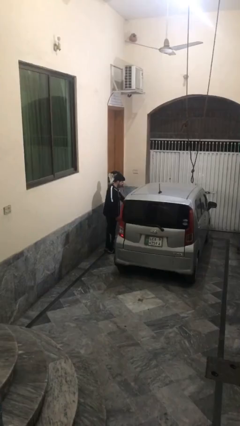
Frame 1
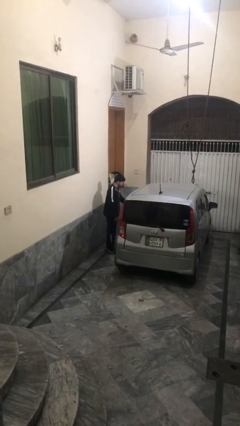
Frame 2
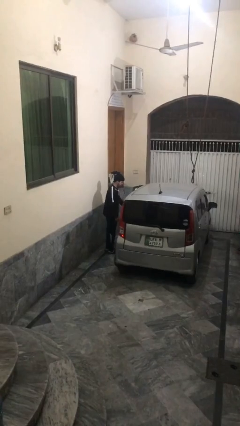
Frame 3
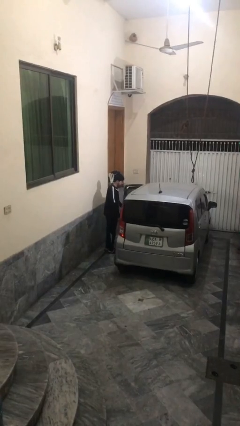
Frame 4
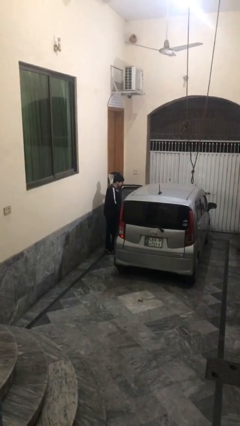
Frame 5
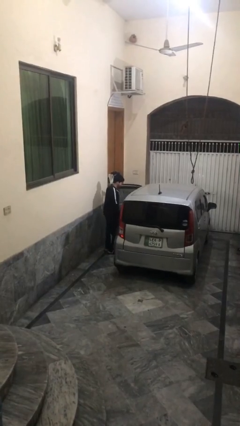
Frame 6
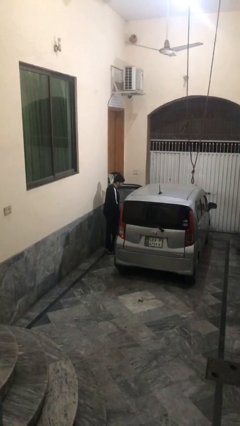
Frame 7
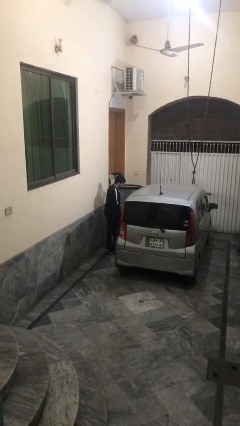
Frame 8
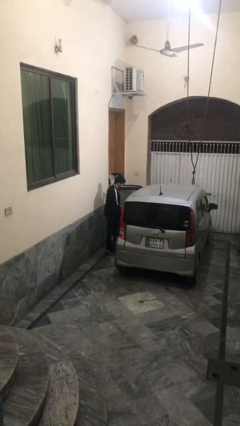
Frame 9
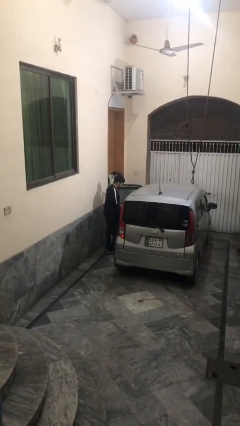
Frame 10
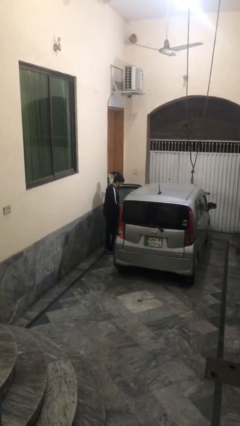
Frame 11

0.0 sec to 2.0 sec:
person opens car door

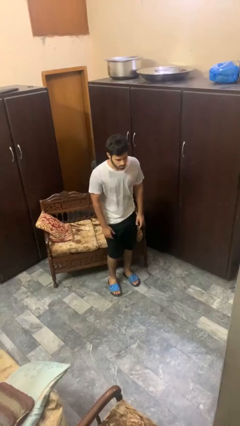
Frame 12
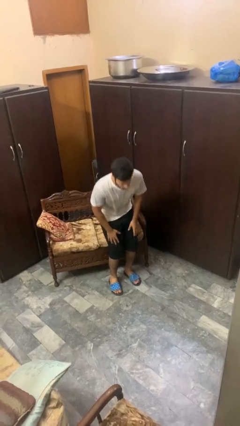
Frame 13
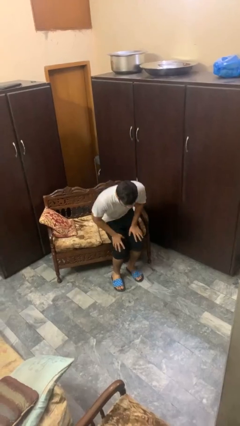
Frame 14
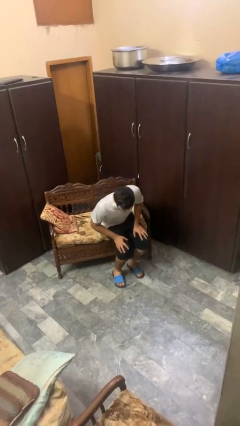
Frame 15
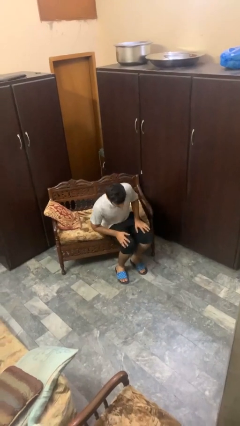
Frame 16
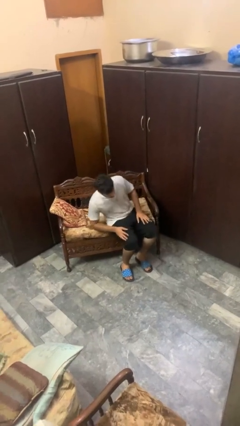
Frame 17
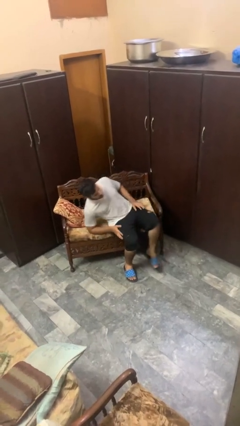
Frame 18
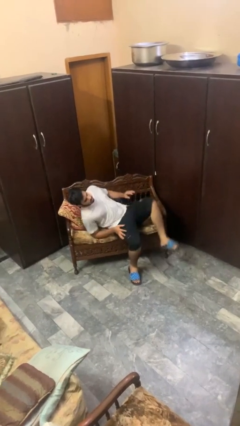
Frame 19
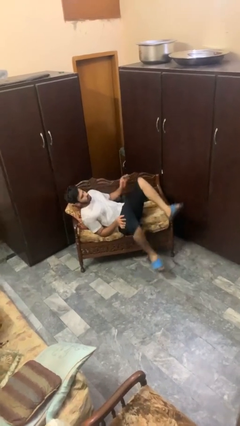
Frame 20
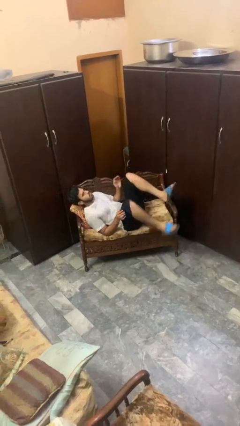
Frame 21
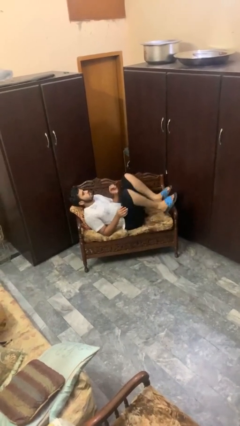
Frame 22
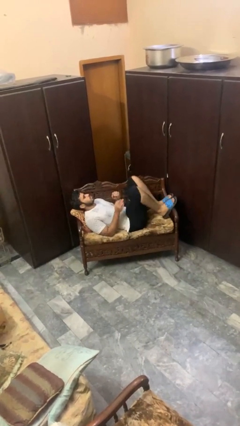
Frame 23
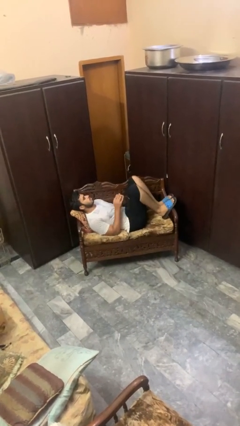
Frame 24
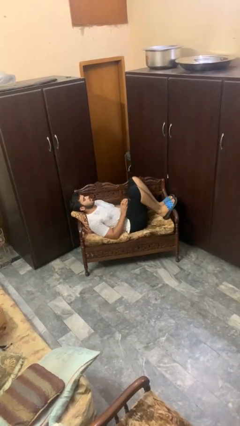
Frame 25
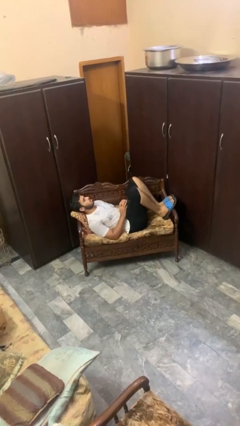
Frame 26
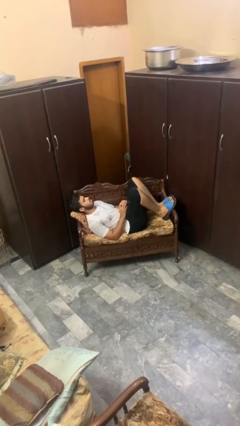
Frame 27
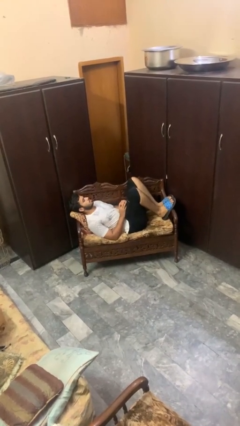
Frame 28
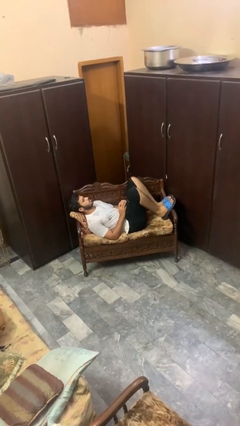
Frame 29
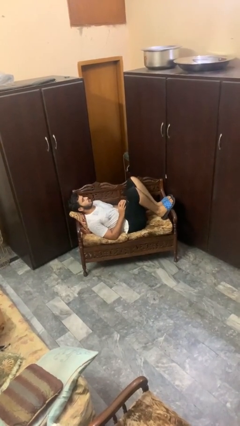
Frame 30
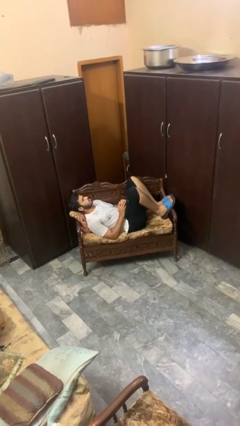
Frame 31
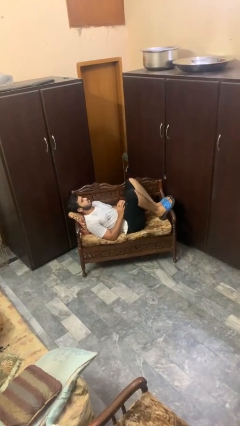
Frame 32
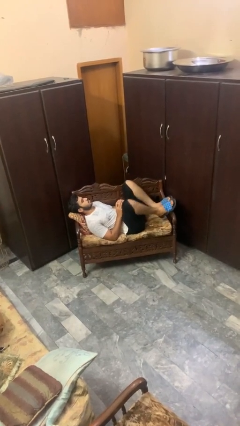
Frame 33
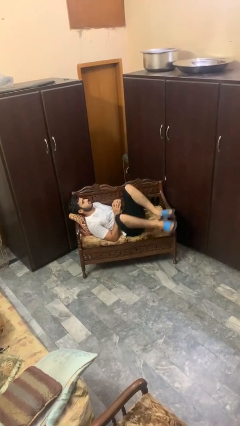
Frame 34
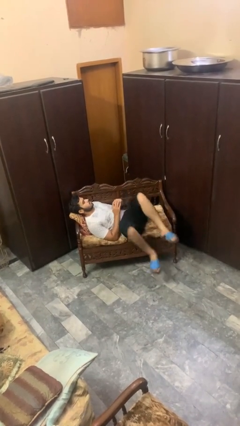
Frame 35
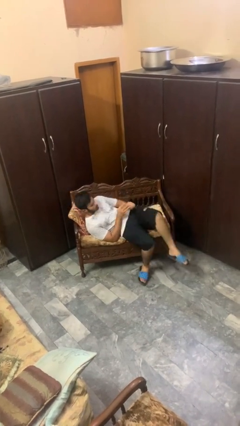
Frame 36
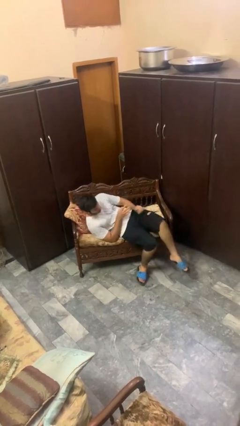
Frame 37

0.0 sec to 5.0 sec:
person lies down on couch

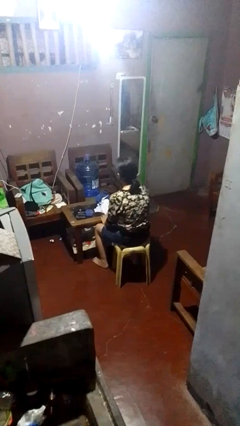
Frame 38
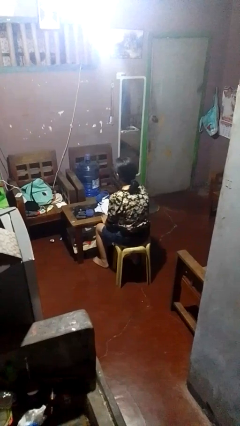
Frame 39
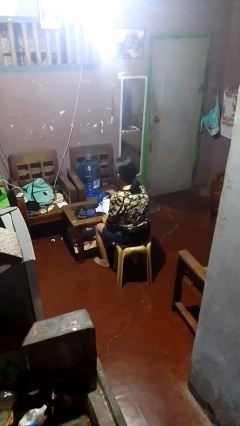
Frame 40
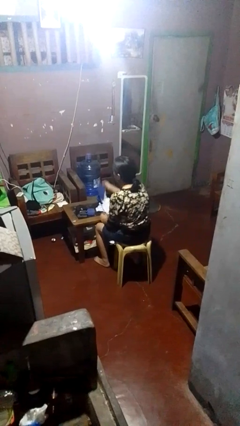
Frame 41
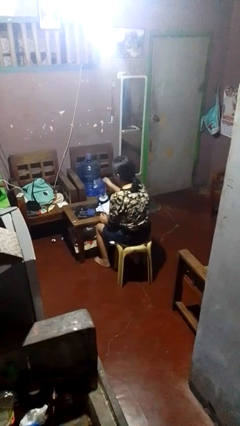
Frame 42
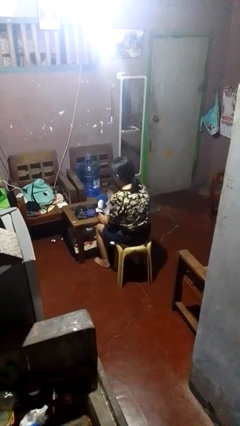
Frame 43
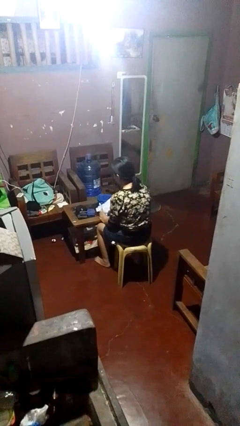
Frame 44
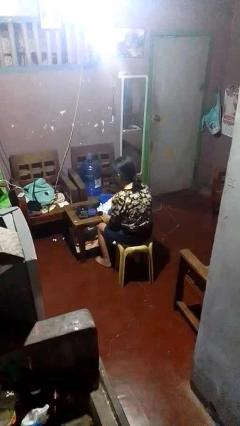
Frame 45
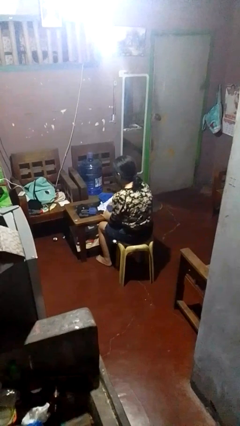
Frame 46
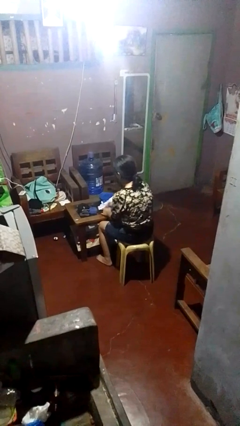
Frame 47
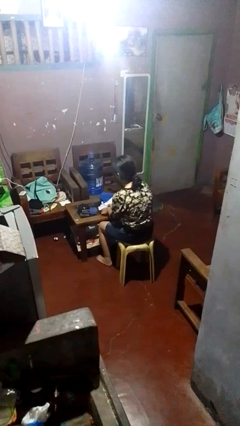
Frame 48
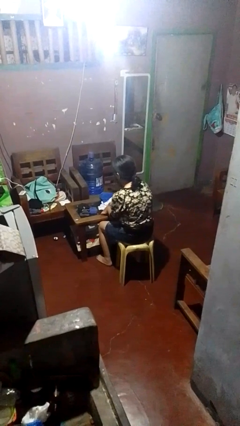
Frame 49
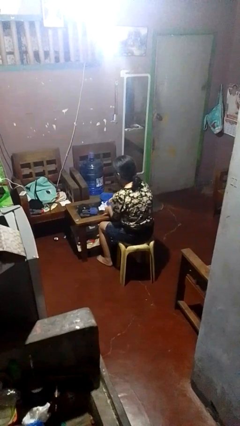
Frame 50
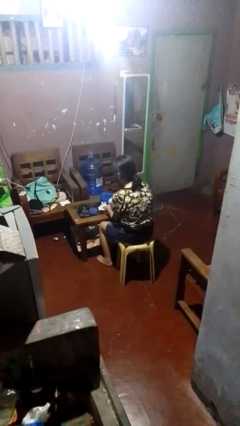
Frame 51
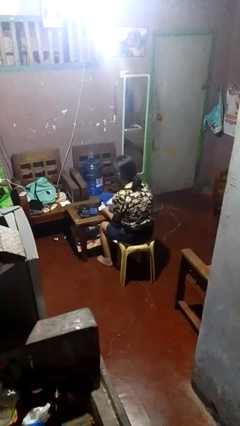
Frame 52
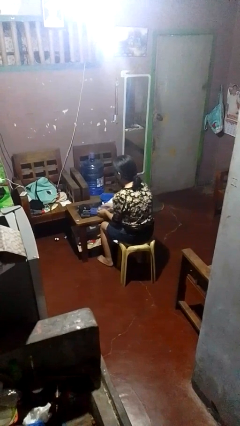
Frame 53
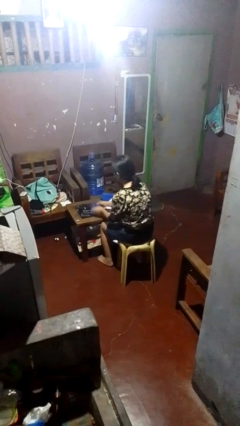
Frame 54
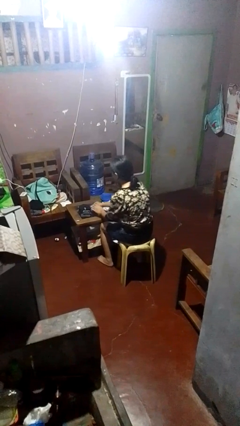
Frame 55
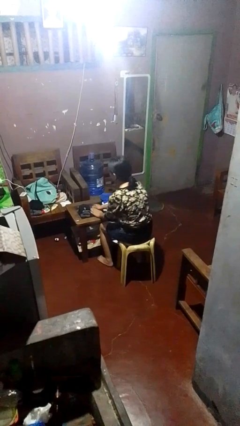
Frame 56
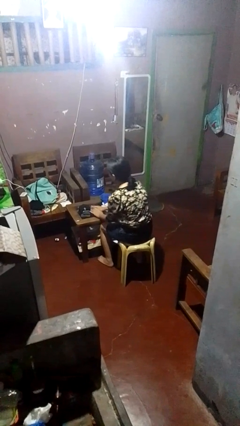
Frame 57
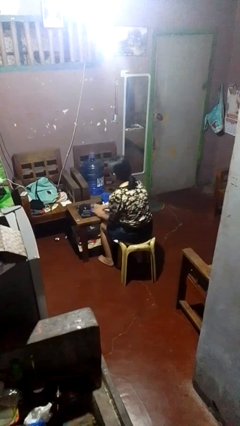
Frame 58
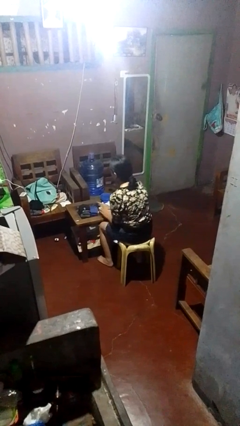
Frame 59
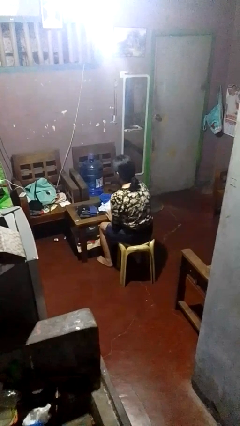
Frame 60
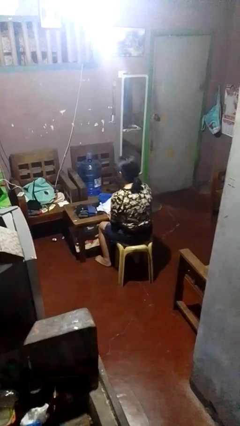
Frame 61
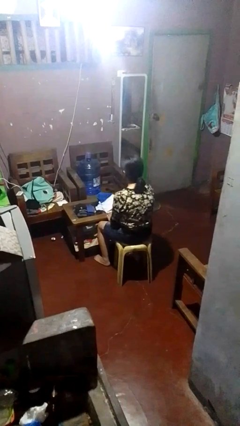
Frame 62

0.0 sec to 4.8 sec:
person folds socks

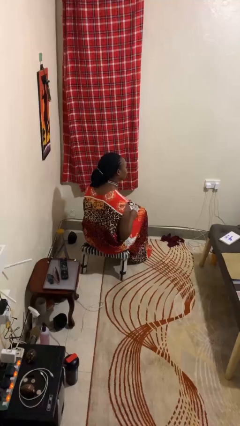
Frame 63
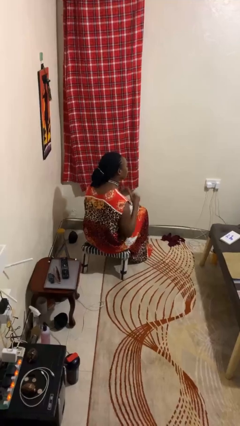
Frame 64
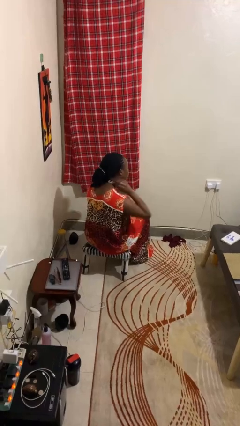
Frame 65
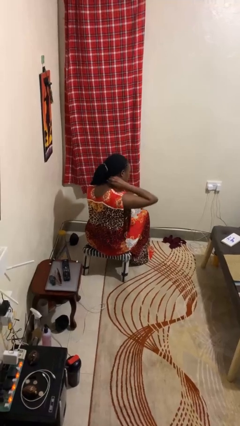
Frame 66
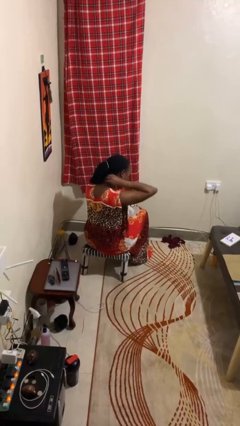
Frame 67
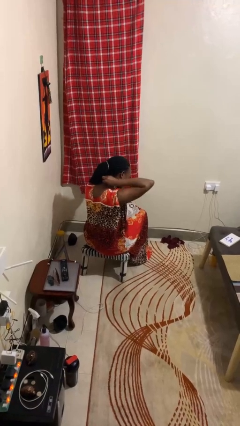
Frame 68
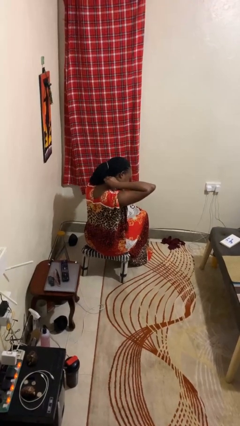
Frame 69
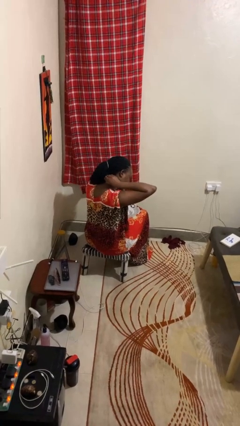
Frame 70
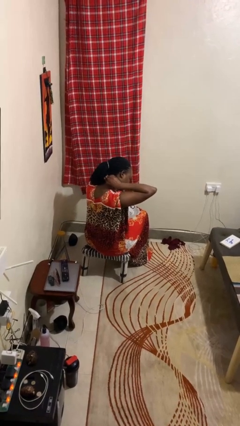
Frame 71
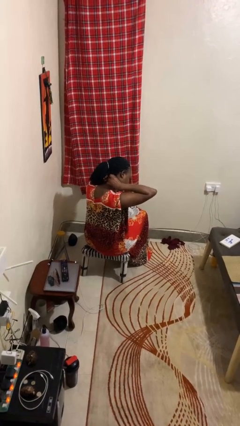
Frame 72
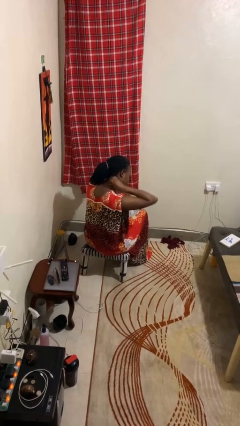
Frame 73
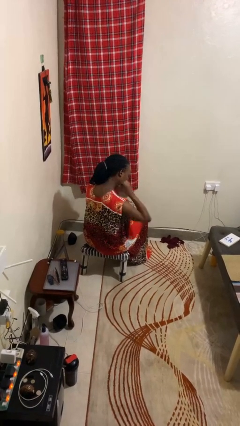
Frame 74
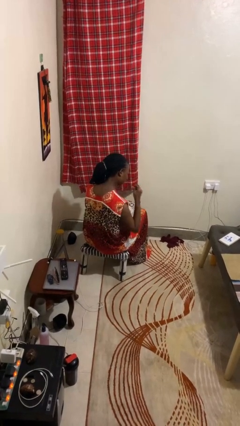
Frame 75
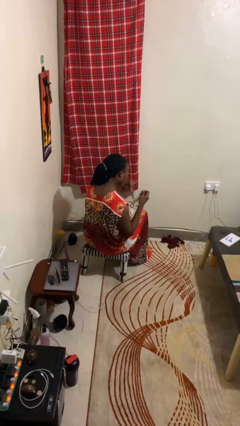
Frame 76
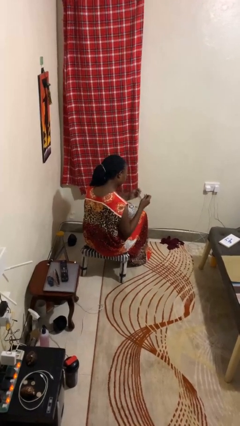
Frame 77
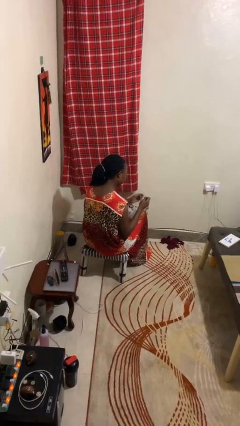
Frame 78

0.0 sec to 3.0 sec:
person takes off necklace

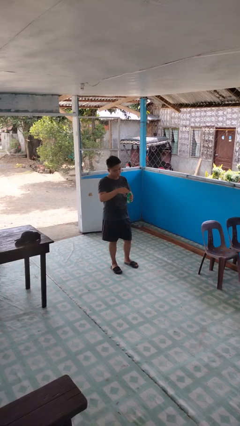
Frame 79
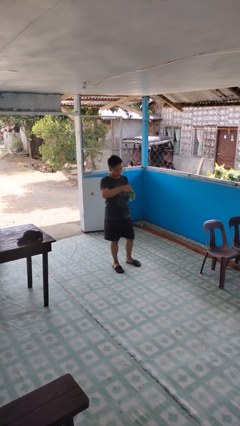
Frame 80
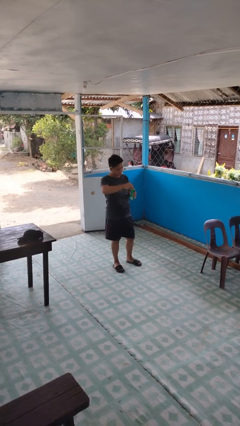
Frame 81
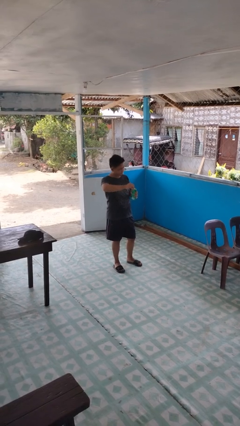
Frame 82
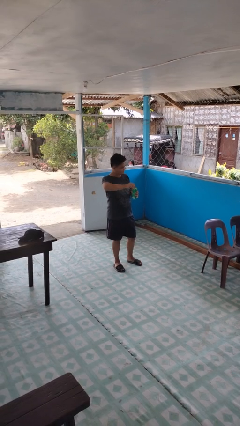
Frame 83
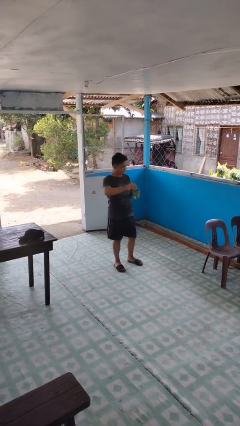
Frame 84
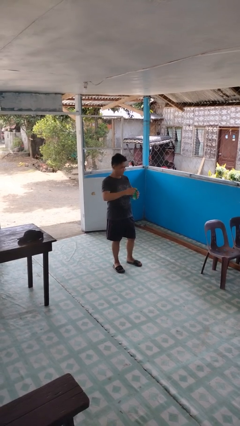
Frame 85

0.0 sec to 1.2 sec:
person opens beverage can

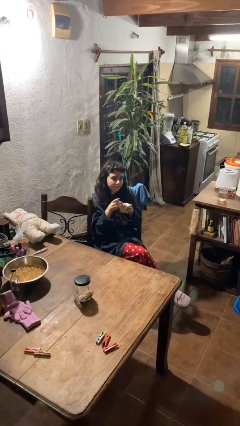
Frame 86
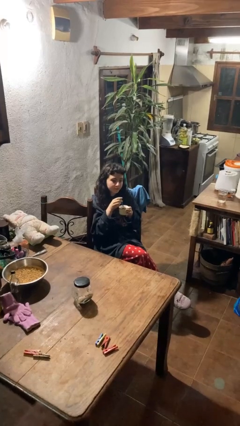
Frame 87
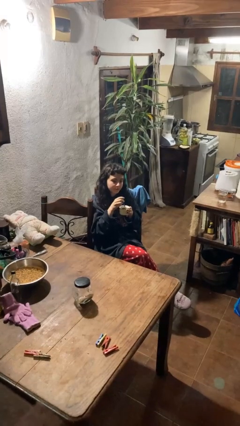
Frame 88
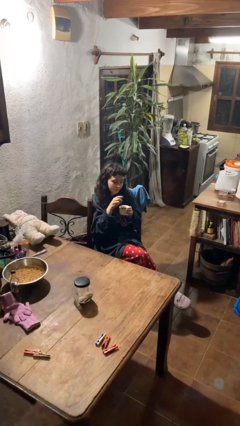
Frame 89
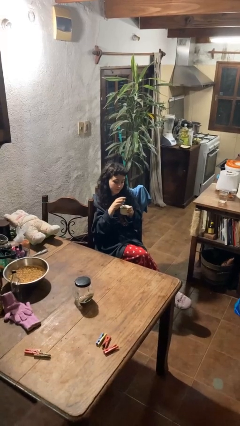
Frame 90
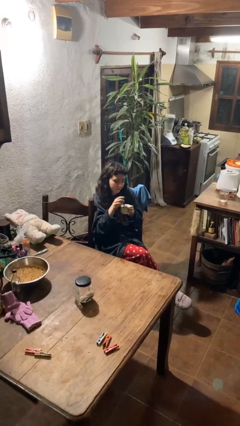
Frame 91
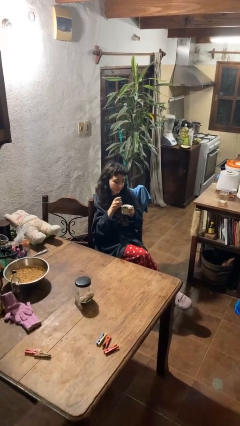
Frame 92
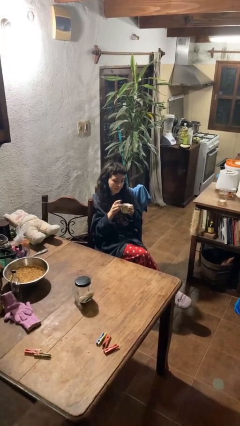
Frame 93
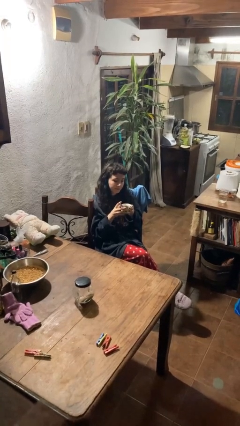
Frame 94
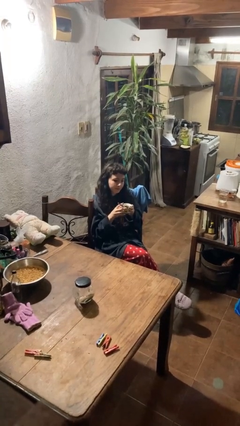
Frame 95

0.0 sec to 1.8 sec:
person stirs mug
